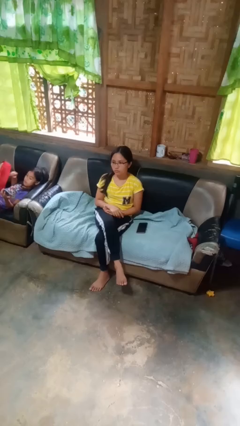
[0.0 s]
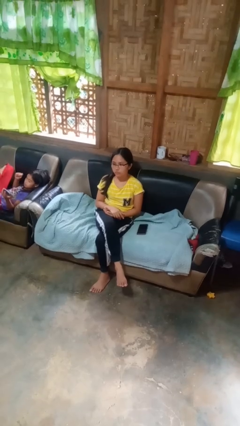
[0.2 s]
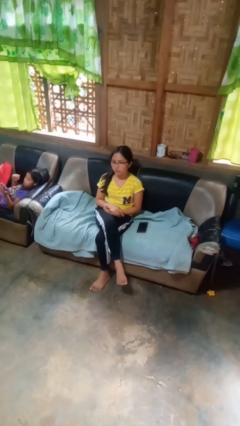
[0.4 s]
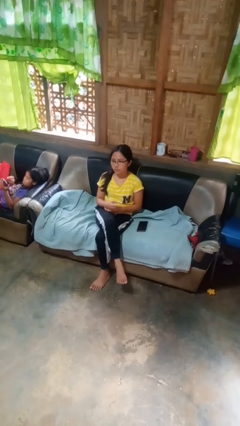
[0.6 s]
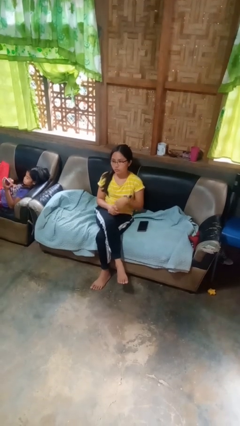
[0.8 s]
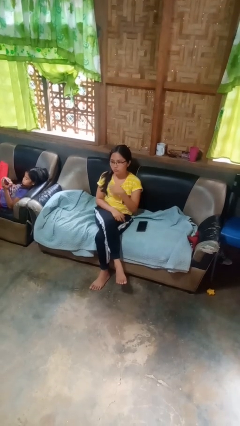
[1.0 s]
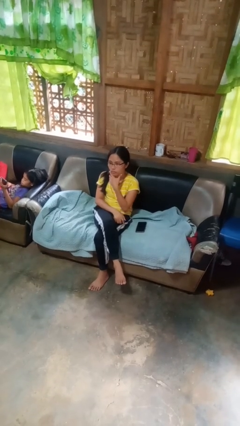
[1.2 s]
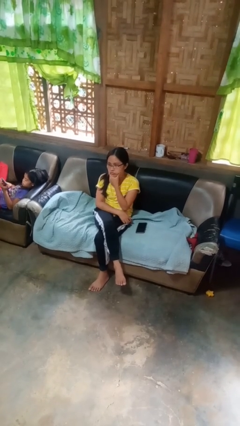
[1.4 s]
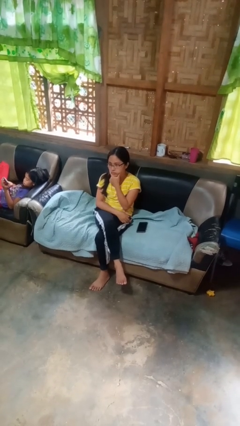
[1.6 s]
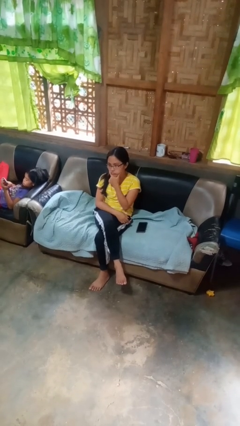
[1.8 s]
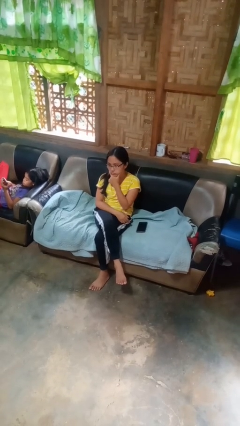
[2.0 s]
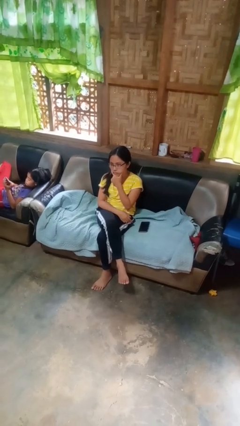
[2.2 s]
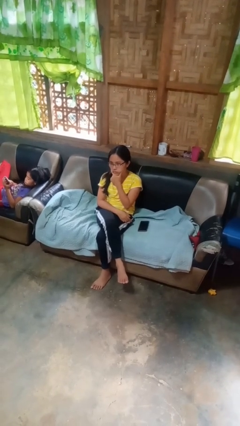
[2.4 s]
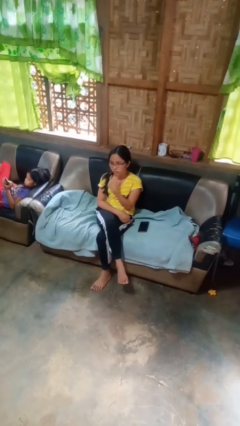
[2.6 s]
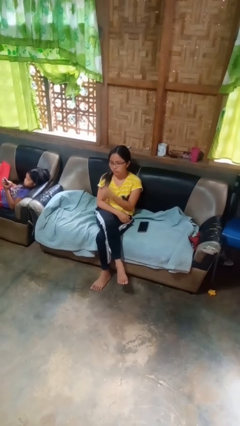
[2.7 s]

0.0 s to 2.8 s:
person strokes chin

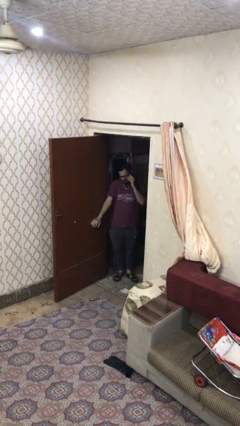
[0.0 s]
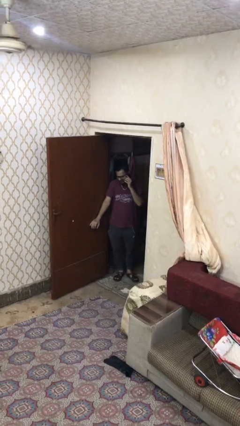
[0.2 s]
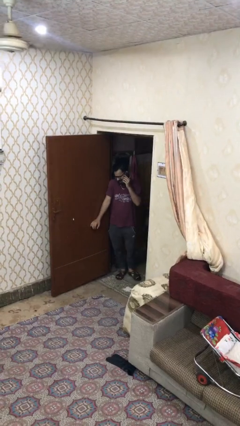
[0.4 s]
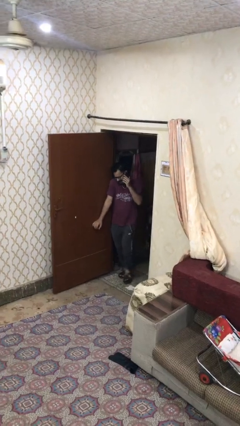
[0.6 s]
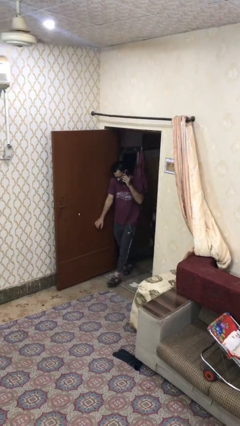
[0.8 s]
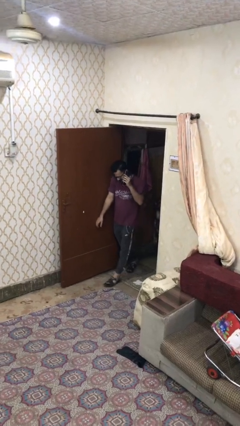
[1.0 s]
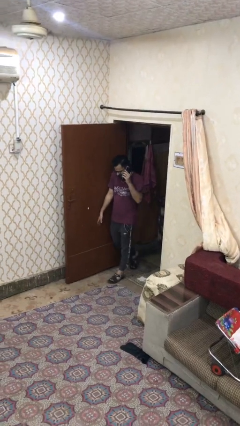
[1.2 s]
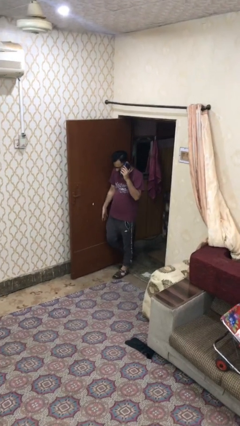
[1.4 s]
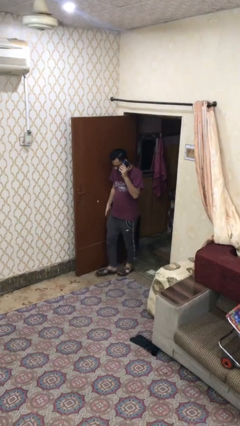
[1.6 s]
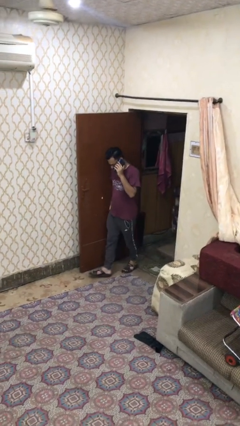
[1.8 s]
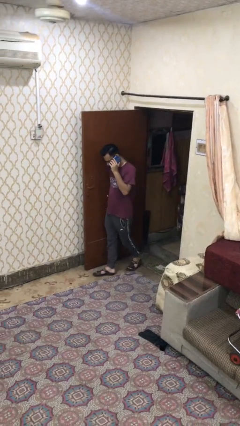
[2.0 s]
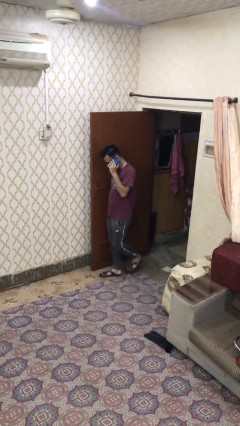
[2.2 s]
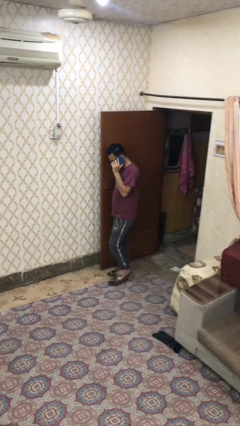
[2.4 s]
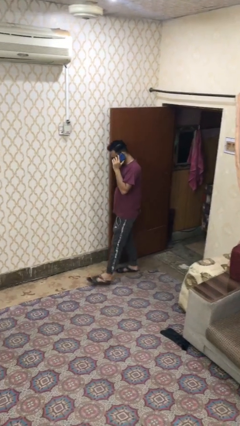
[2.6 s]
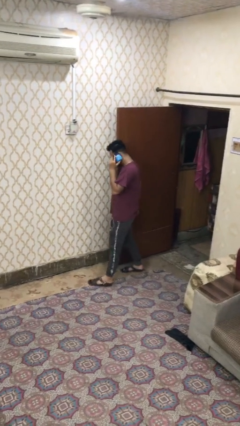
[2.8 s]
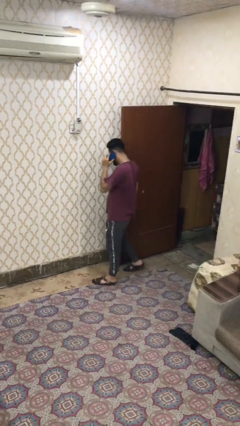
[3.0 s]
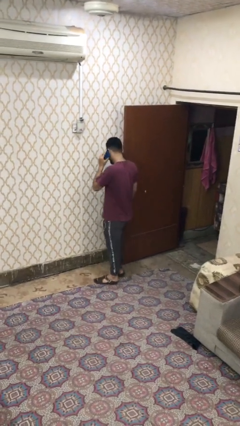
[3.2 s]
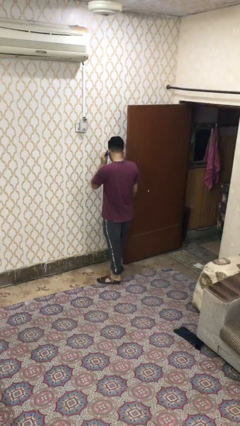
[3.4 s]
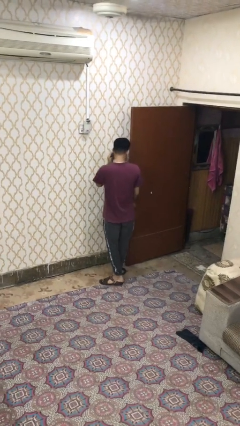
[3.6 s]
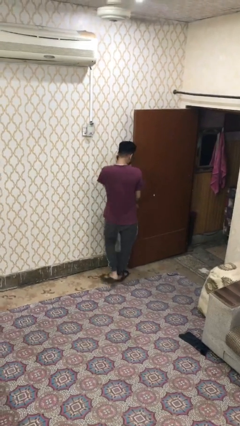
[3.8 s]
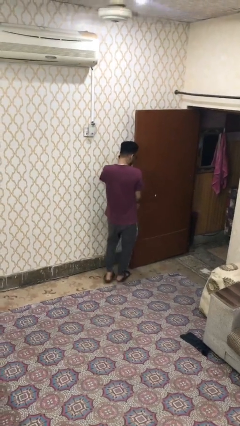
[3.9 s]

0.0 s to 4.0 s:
person enters scene through structure

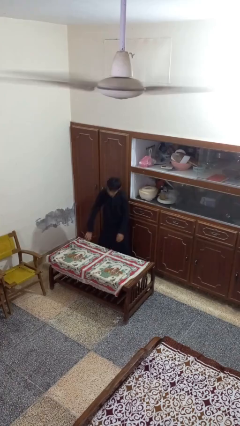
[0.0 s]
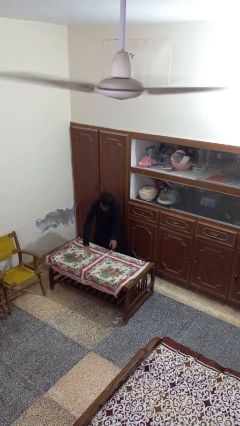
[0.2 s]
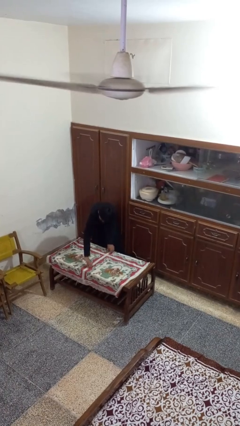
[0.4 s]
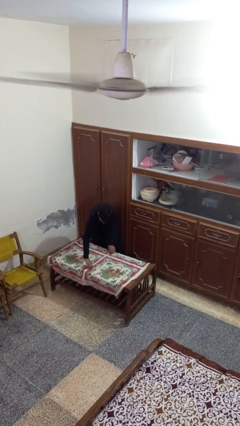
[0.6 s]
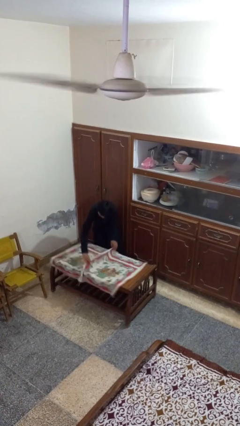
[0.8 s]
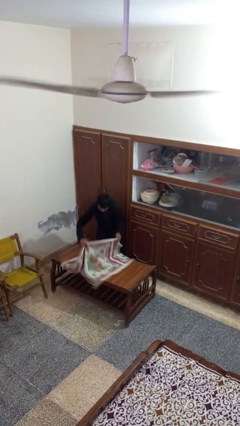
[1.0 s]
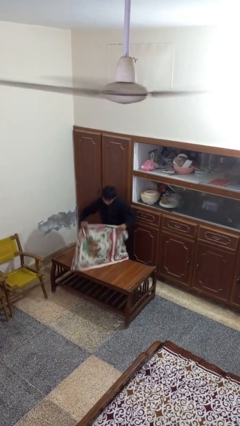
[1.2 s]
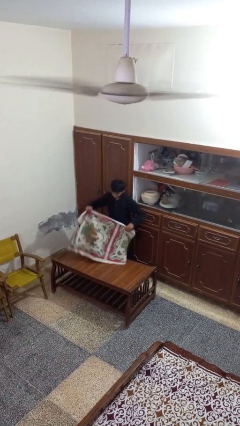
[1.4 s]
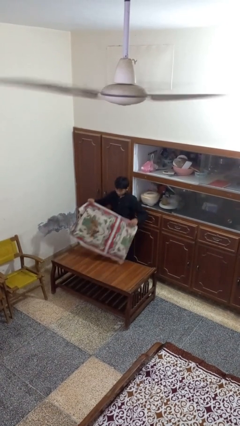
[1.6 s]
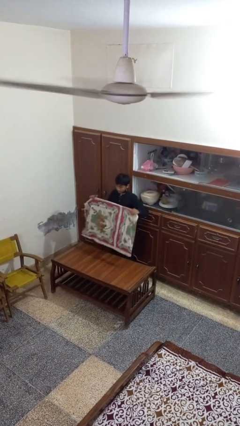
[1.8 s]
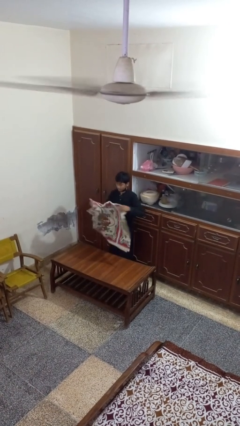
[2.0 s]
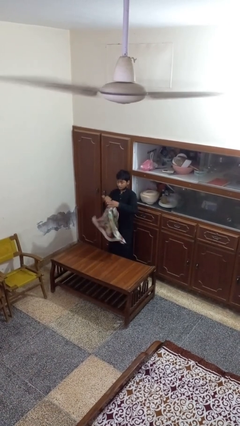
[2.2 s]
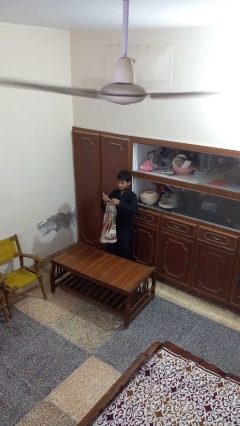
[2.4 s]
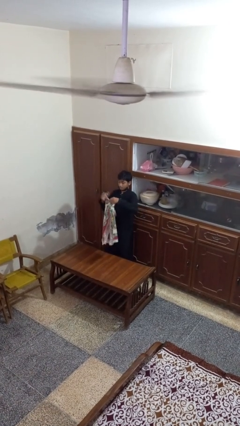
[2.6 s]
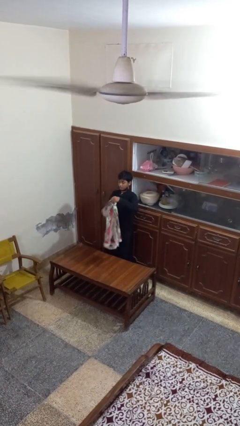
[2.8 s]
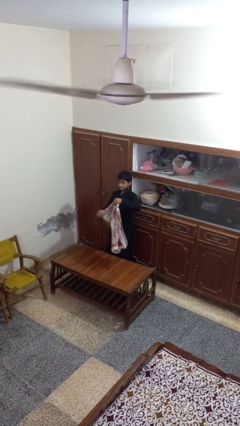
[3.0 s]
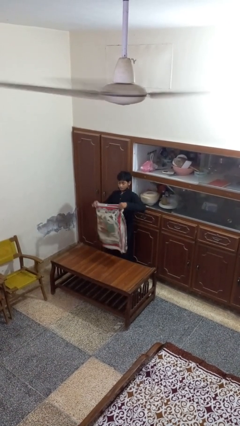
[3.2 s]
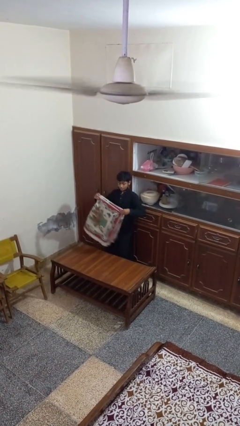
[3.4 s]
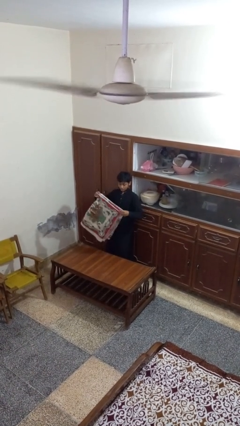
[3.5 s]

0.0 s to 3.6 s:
person folds tablecloth

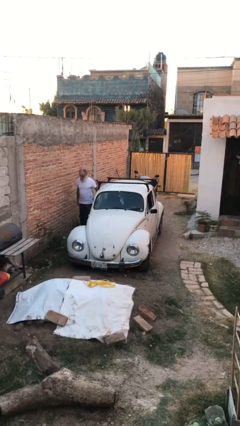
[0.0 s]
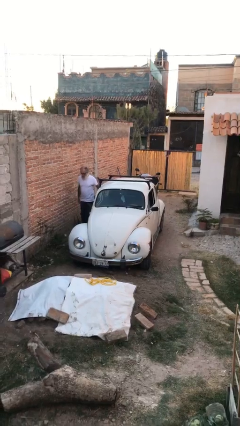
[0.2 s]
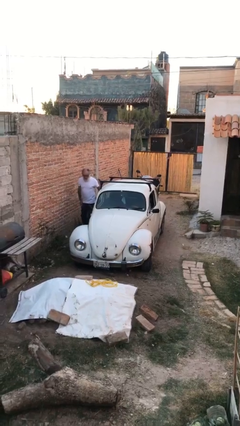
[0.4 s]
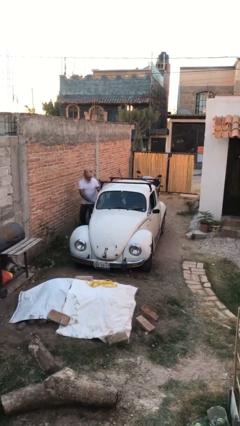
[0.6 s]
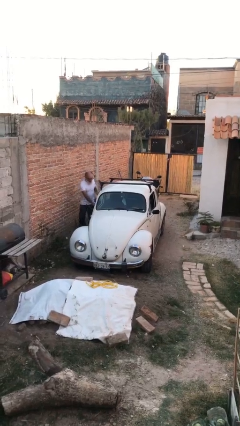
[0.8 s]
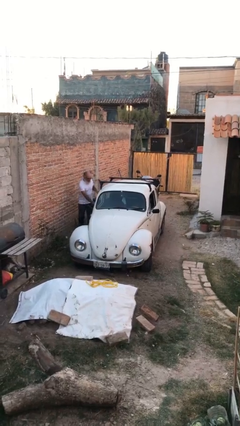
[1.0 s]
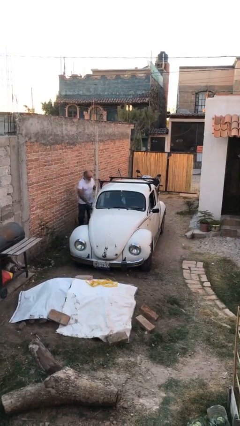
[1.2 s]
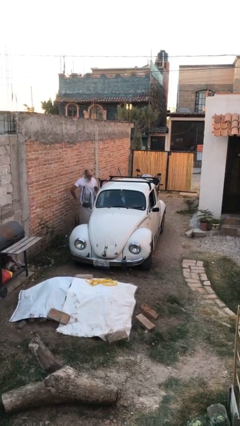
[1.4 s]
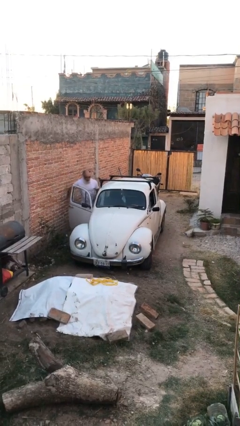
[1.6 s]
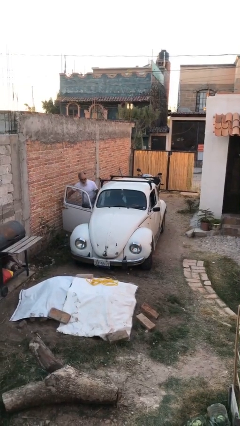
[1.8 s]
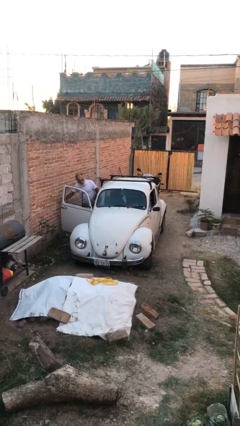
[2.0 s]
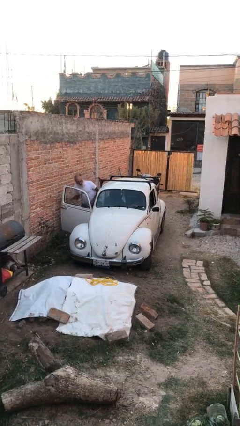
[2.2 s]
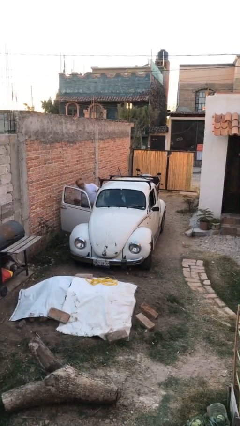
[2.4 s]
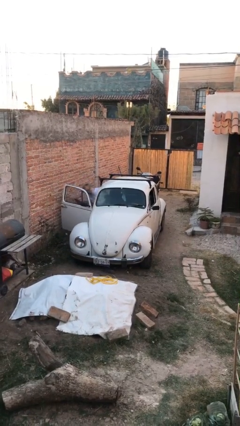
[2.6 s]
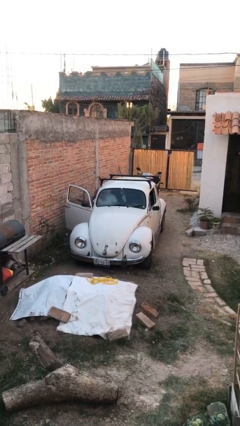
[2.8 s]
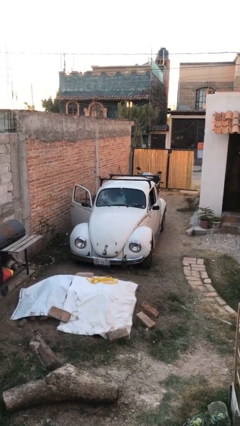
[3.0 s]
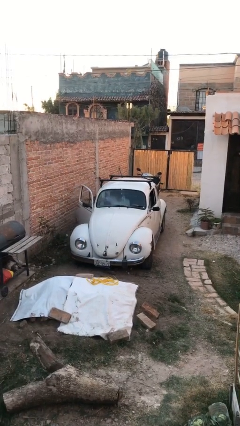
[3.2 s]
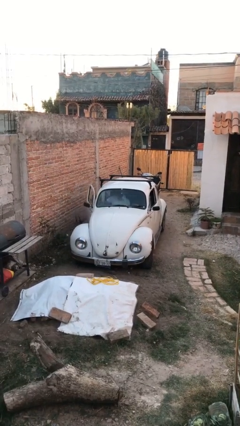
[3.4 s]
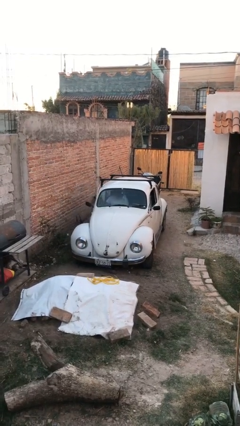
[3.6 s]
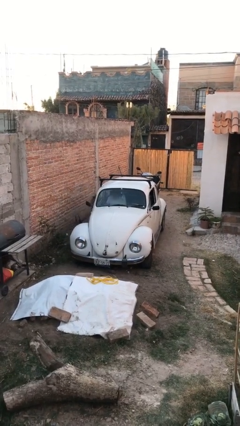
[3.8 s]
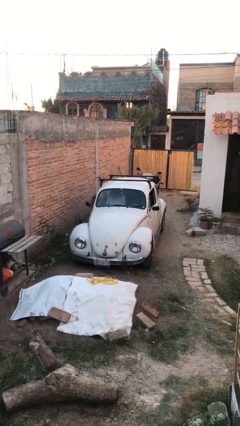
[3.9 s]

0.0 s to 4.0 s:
car picks up person

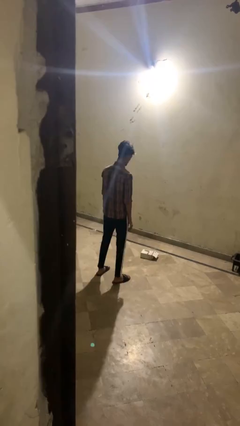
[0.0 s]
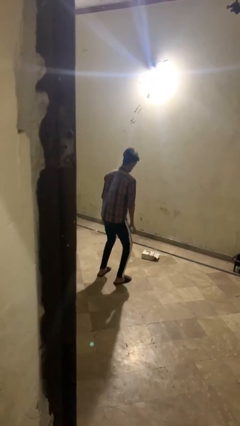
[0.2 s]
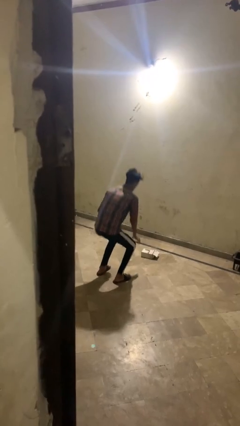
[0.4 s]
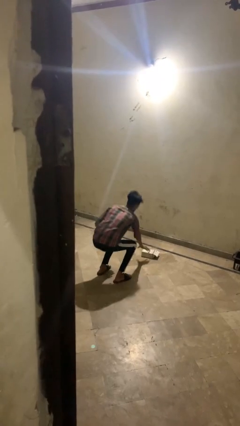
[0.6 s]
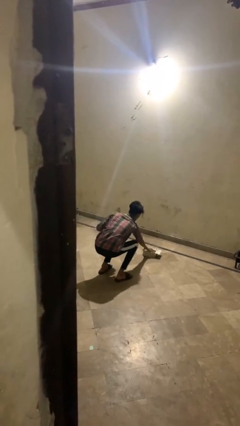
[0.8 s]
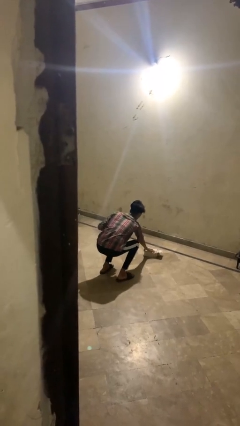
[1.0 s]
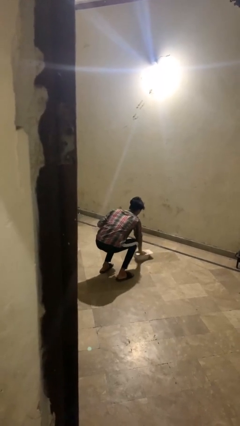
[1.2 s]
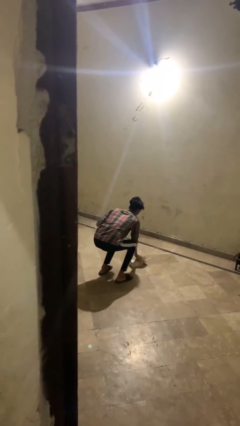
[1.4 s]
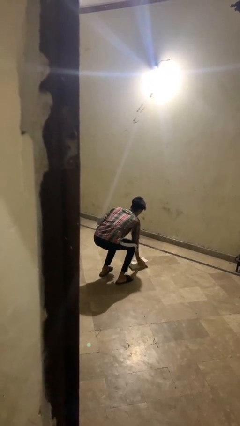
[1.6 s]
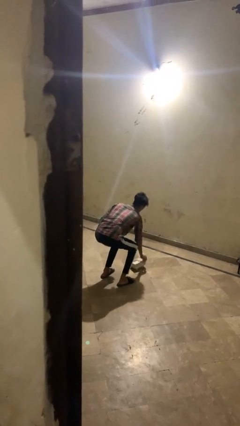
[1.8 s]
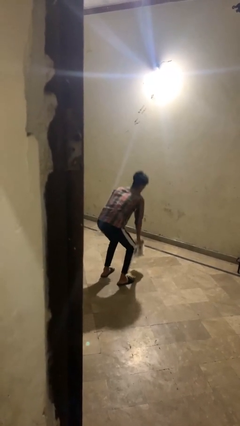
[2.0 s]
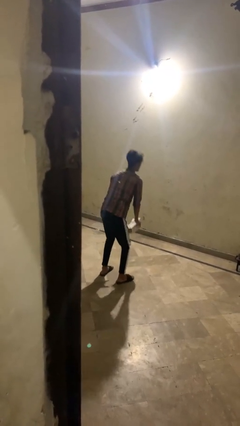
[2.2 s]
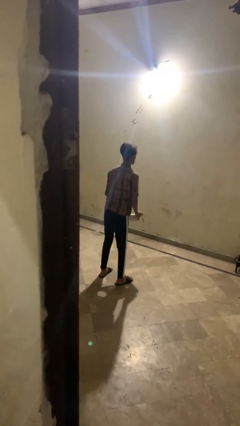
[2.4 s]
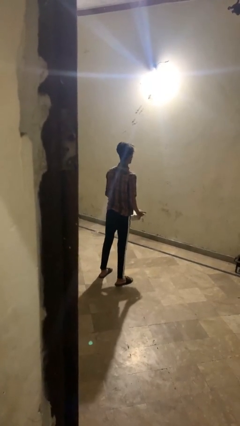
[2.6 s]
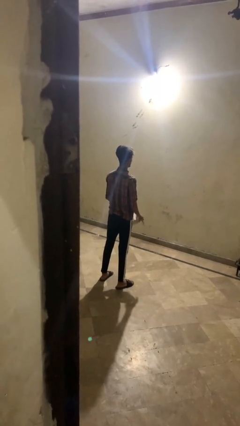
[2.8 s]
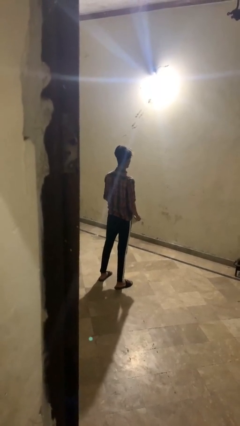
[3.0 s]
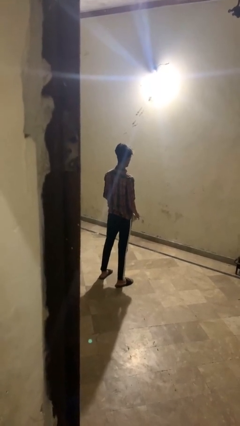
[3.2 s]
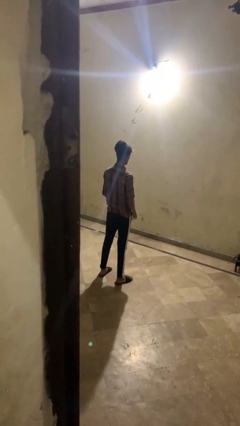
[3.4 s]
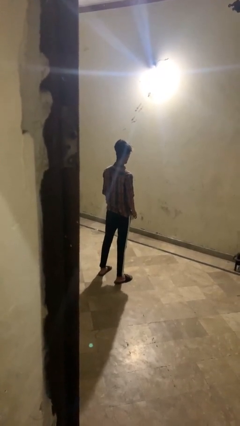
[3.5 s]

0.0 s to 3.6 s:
person picks up object from floor
